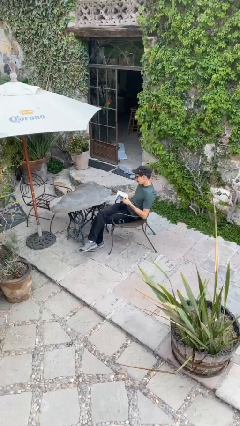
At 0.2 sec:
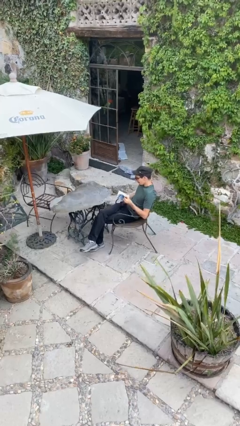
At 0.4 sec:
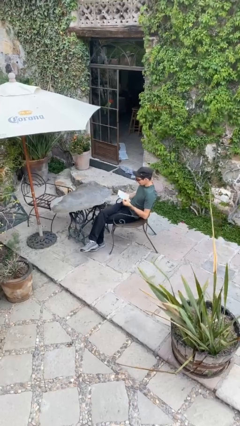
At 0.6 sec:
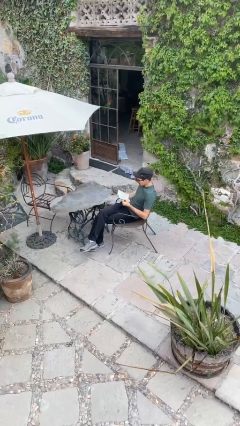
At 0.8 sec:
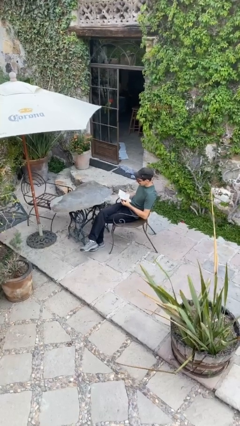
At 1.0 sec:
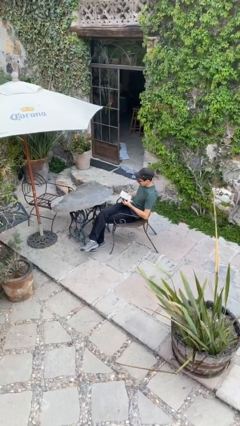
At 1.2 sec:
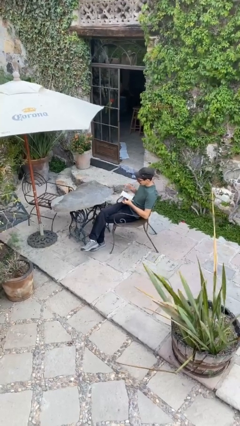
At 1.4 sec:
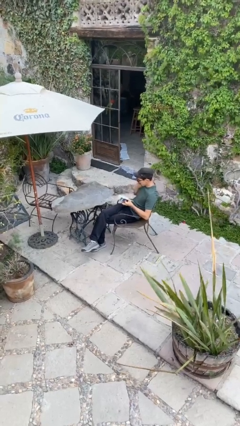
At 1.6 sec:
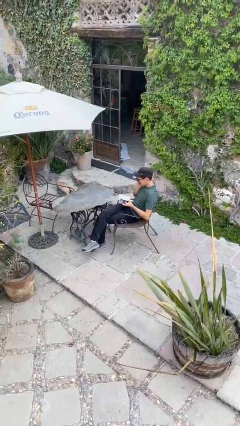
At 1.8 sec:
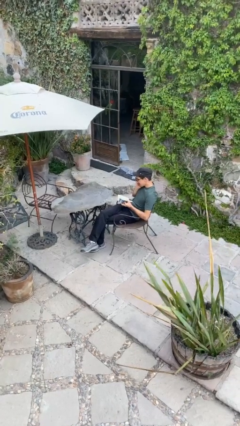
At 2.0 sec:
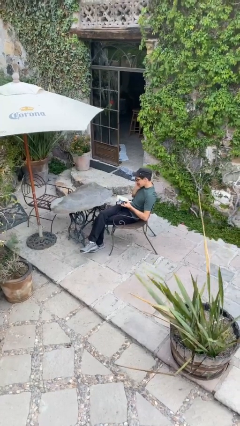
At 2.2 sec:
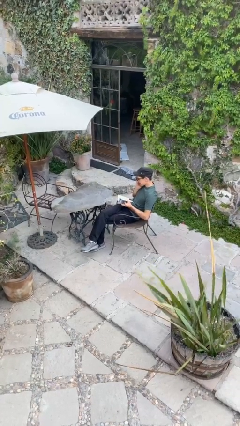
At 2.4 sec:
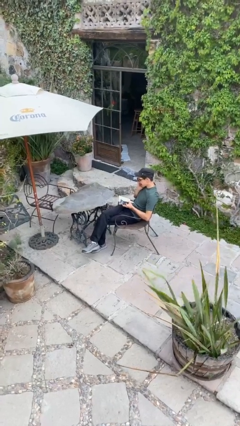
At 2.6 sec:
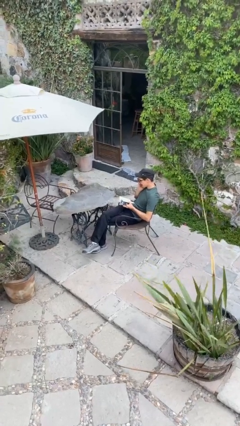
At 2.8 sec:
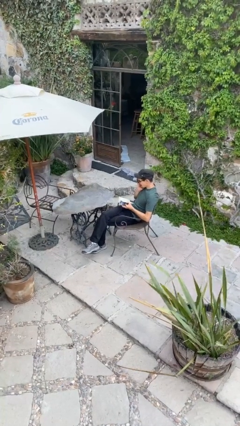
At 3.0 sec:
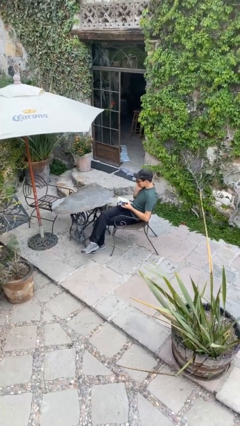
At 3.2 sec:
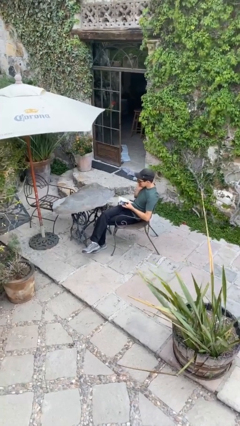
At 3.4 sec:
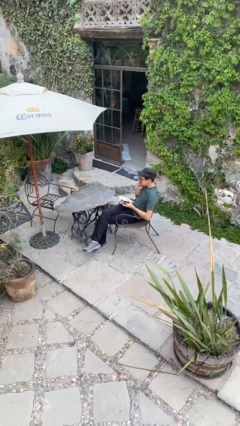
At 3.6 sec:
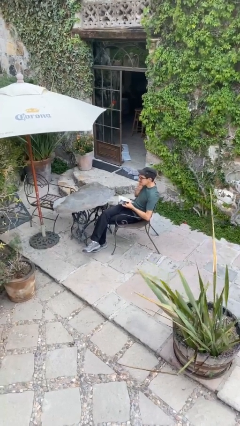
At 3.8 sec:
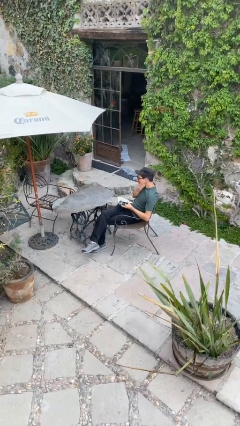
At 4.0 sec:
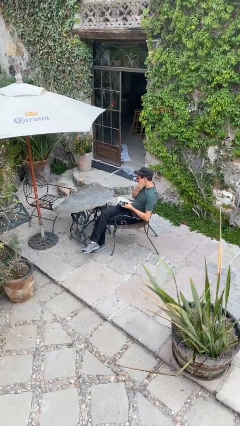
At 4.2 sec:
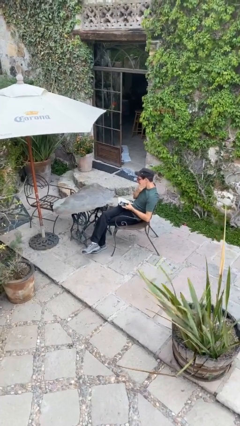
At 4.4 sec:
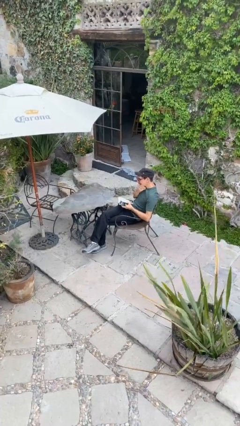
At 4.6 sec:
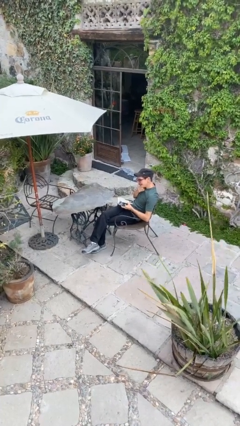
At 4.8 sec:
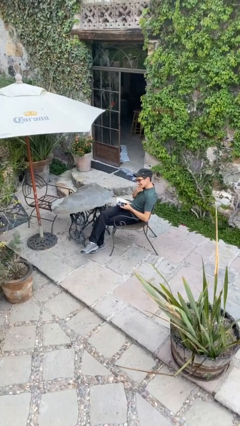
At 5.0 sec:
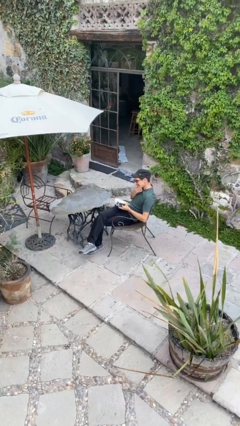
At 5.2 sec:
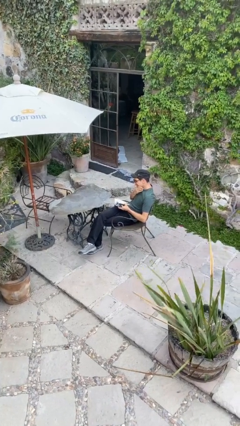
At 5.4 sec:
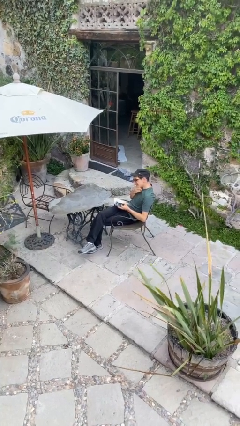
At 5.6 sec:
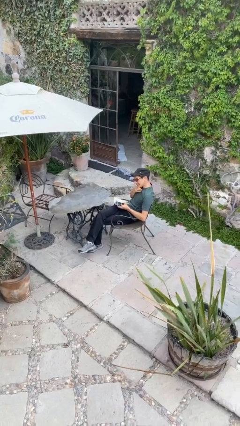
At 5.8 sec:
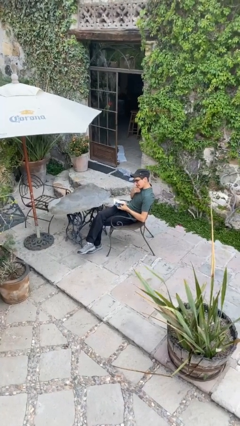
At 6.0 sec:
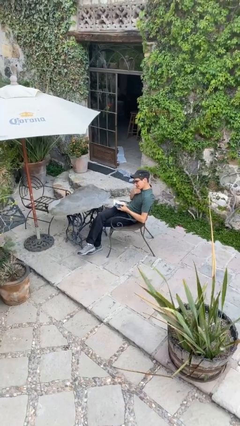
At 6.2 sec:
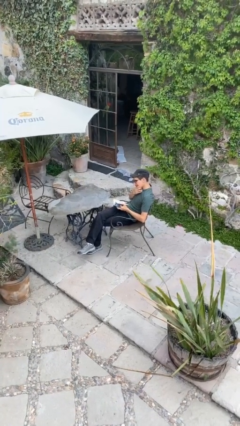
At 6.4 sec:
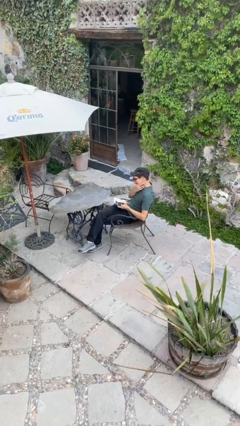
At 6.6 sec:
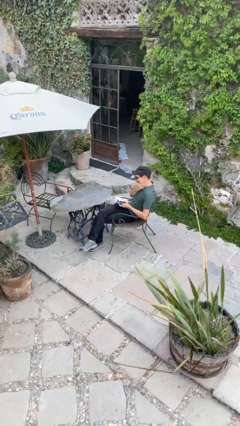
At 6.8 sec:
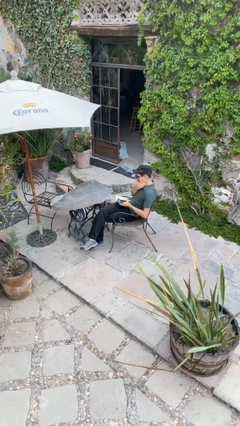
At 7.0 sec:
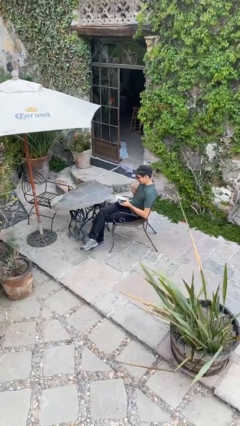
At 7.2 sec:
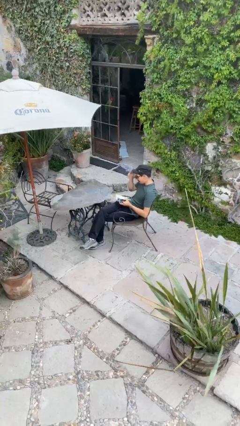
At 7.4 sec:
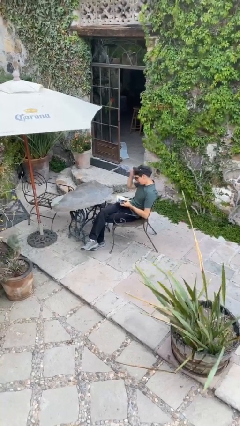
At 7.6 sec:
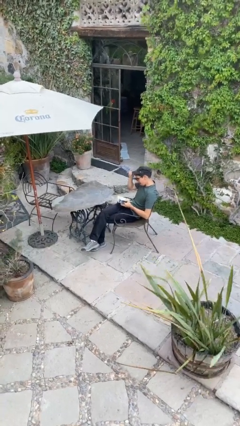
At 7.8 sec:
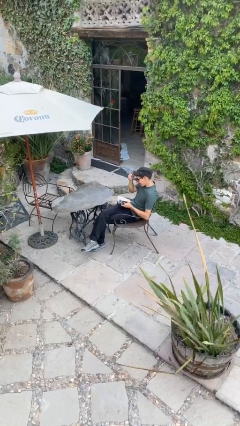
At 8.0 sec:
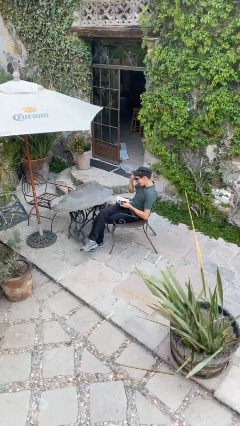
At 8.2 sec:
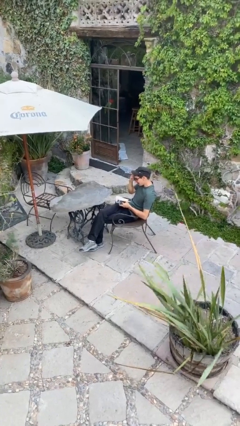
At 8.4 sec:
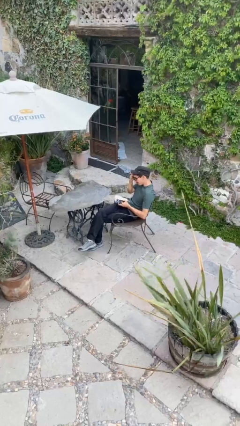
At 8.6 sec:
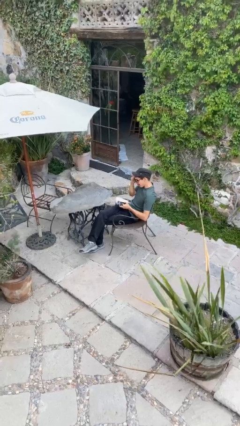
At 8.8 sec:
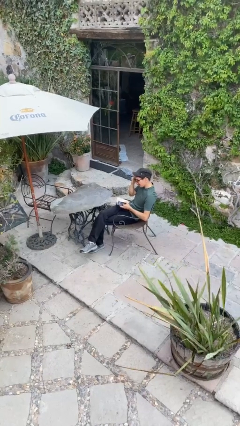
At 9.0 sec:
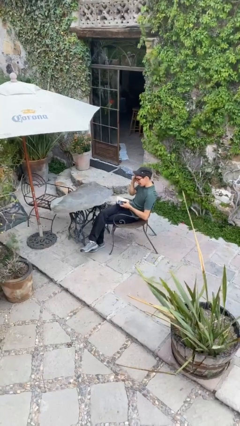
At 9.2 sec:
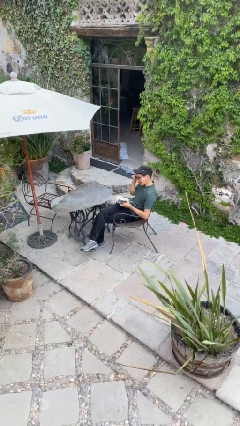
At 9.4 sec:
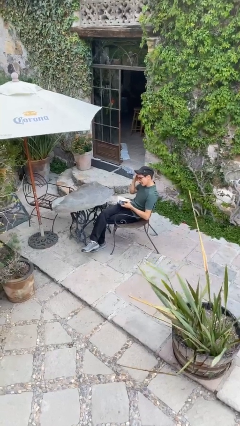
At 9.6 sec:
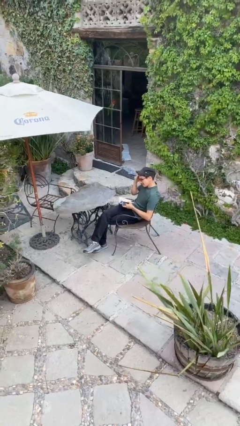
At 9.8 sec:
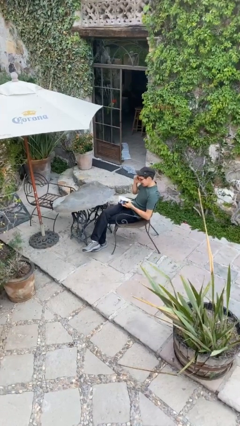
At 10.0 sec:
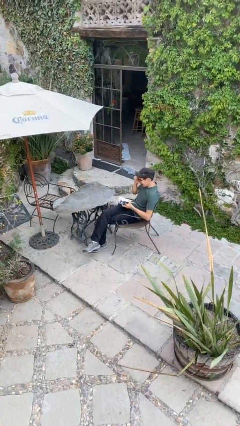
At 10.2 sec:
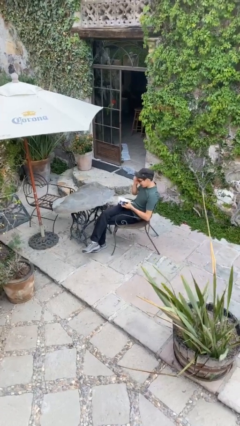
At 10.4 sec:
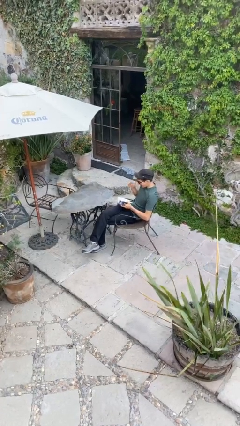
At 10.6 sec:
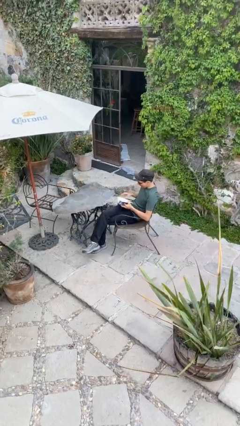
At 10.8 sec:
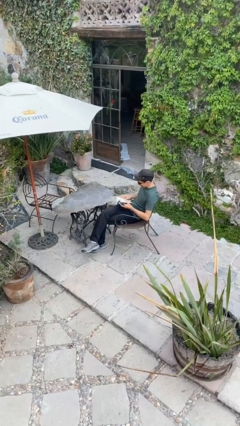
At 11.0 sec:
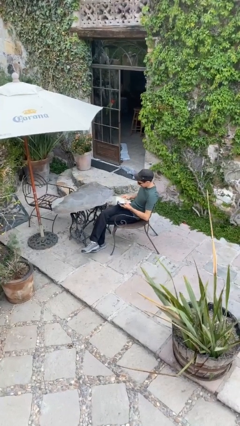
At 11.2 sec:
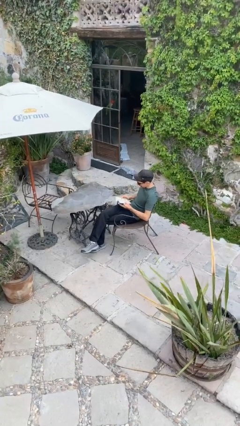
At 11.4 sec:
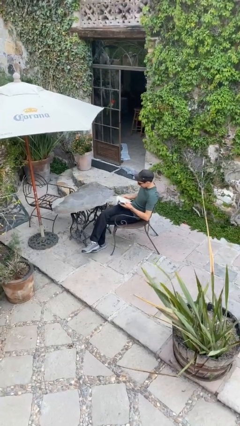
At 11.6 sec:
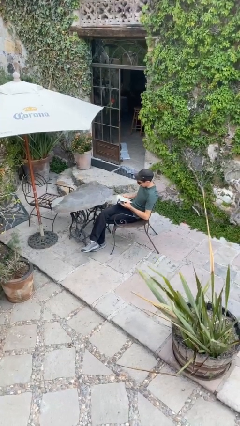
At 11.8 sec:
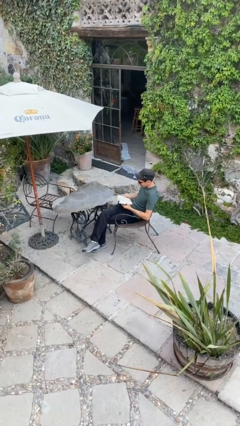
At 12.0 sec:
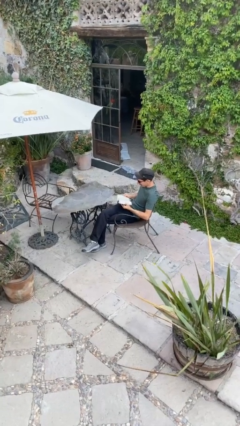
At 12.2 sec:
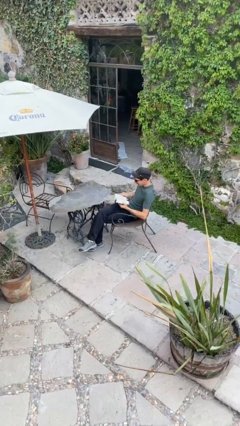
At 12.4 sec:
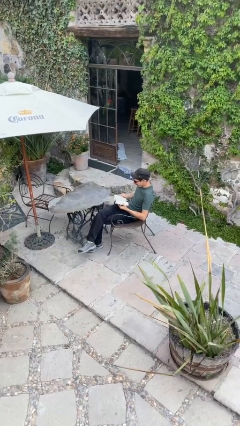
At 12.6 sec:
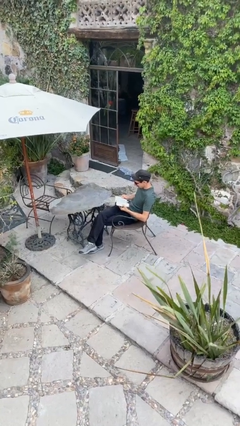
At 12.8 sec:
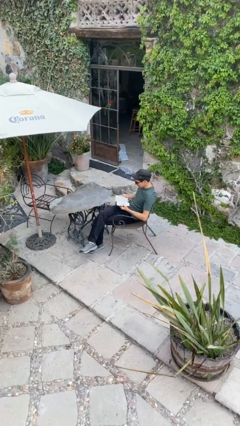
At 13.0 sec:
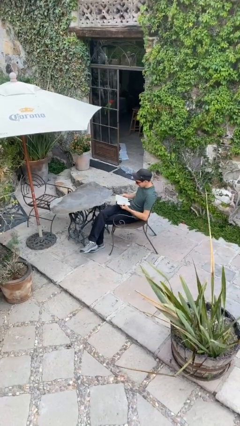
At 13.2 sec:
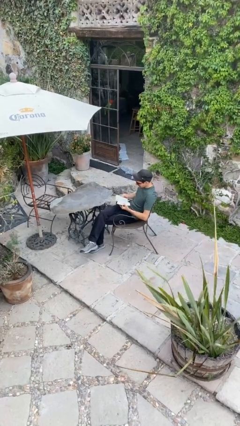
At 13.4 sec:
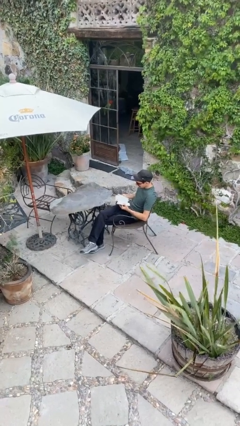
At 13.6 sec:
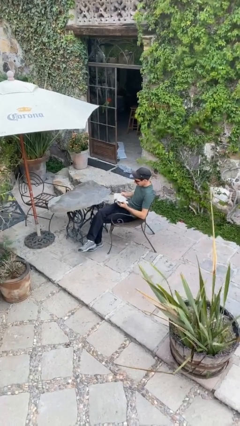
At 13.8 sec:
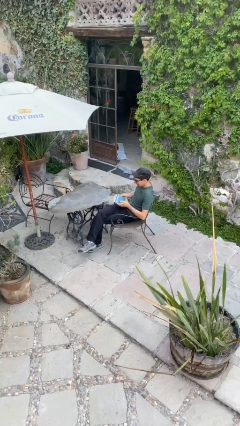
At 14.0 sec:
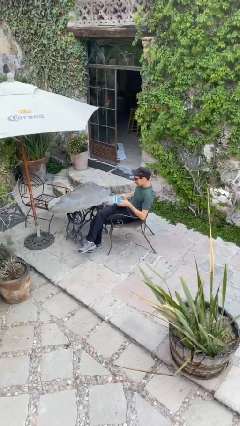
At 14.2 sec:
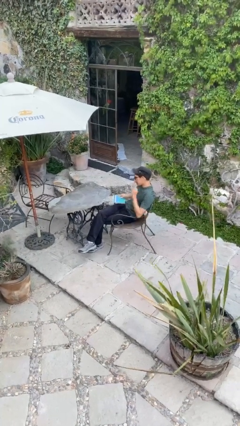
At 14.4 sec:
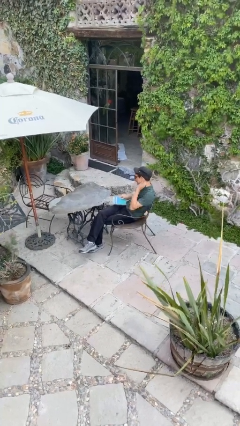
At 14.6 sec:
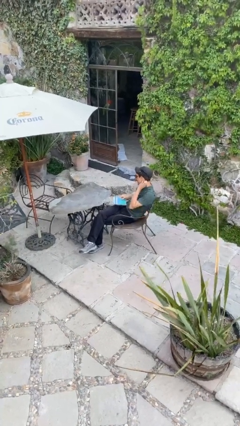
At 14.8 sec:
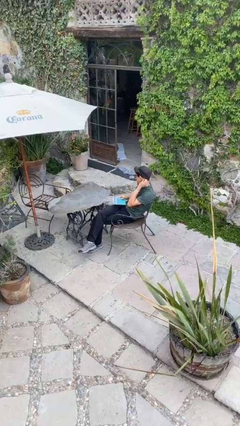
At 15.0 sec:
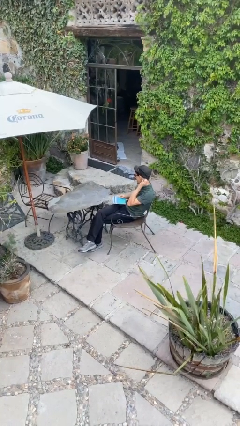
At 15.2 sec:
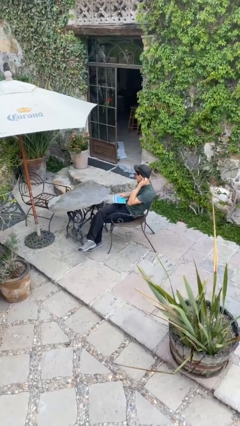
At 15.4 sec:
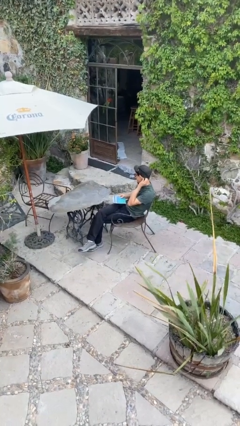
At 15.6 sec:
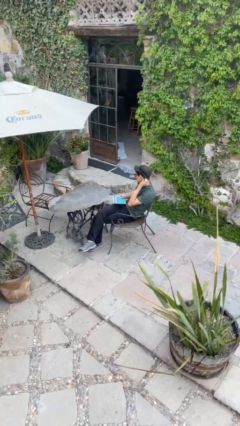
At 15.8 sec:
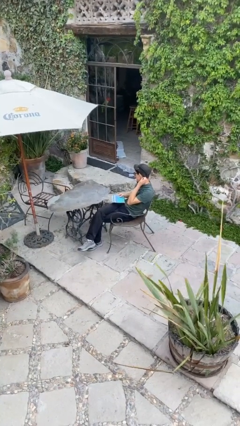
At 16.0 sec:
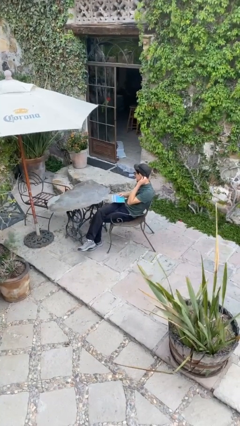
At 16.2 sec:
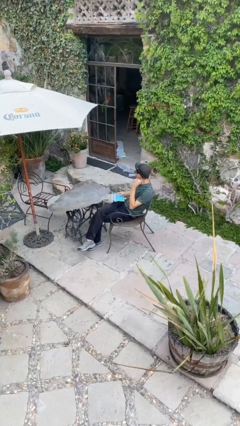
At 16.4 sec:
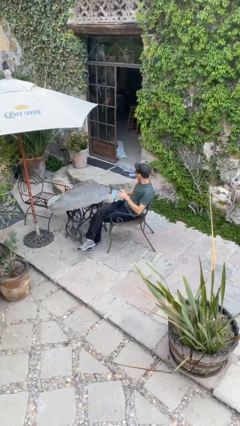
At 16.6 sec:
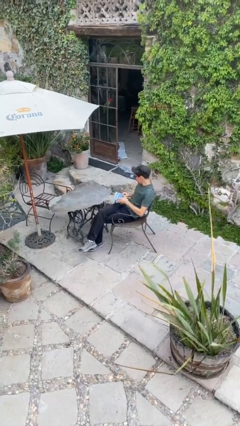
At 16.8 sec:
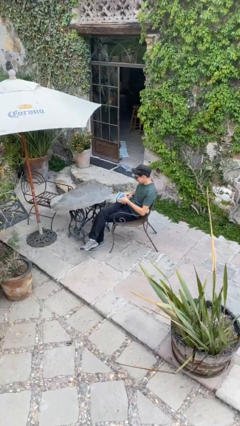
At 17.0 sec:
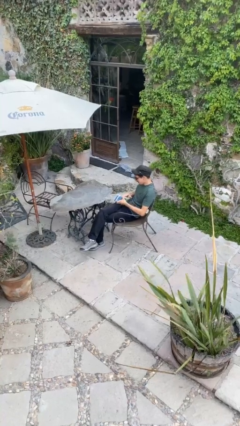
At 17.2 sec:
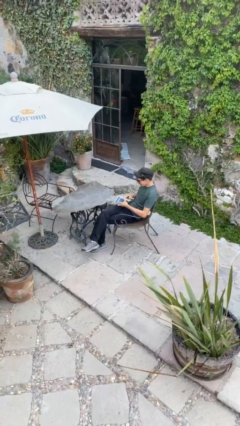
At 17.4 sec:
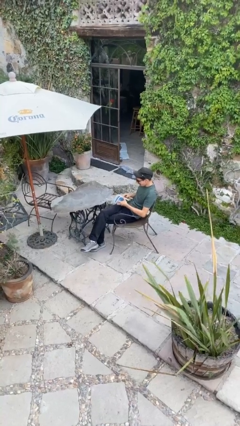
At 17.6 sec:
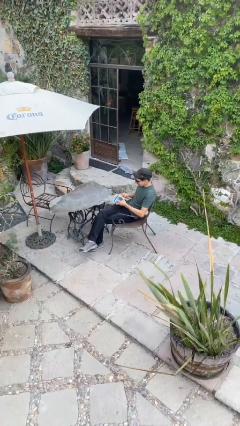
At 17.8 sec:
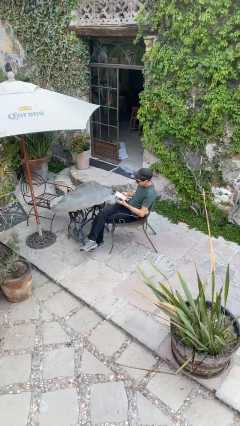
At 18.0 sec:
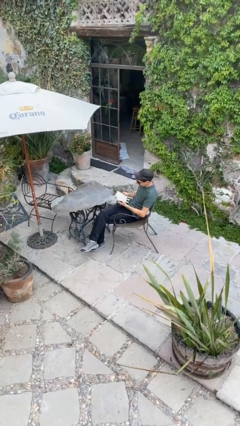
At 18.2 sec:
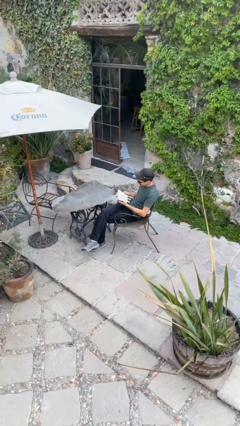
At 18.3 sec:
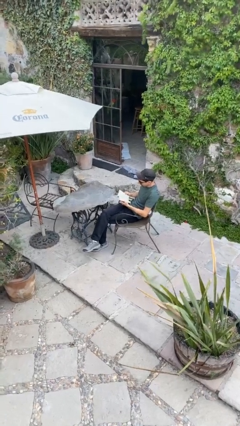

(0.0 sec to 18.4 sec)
person reads document
